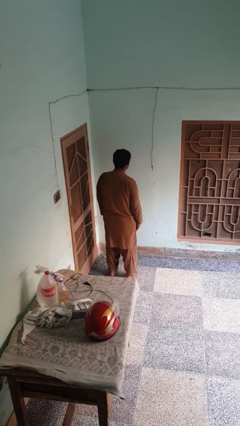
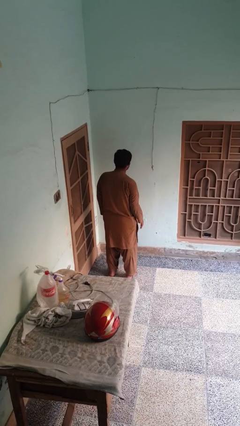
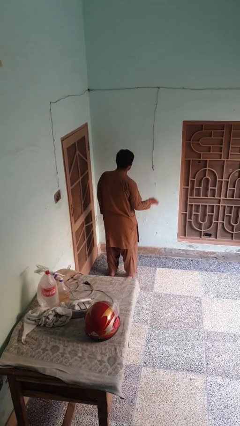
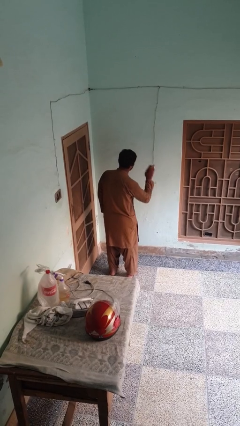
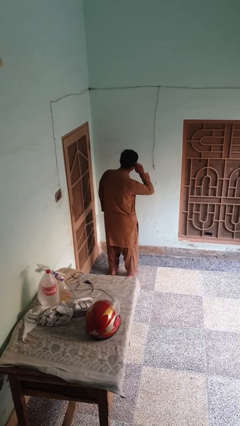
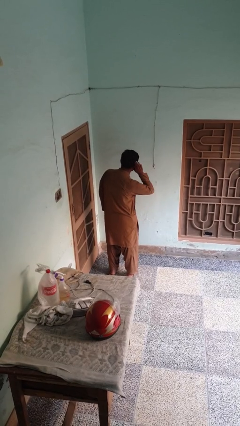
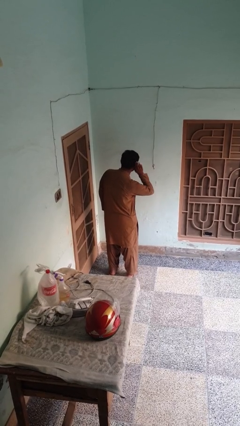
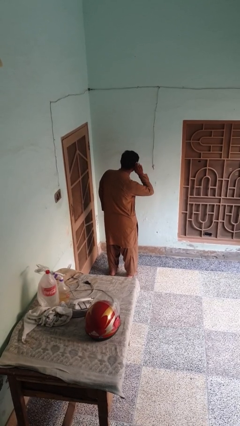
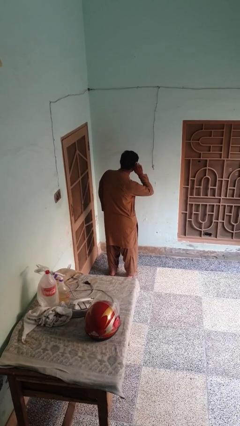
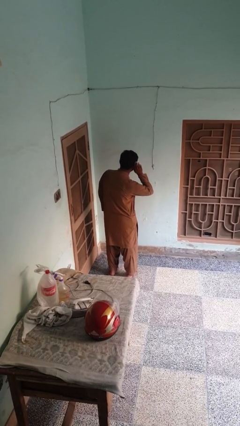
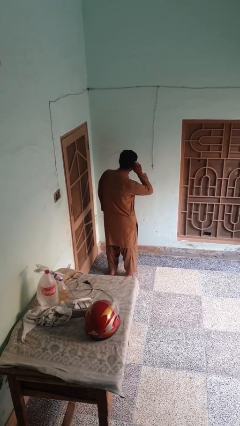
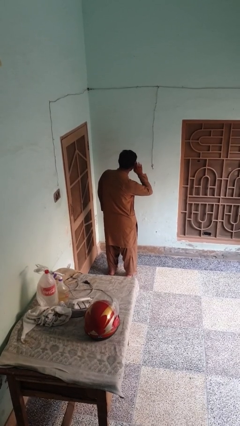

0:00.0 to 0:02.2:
person gestures listen closely

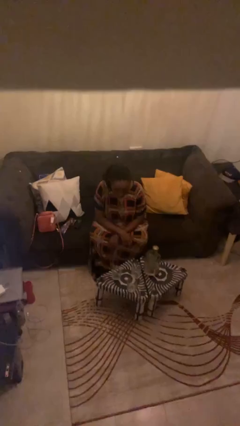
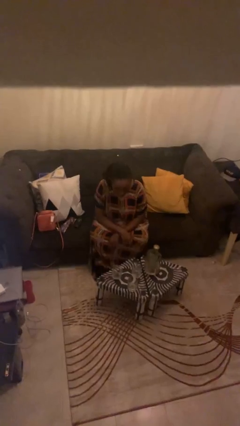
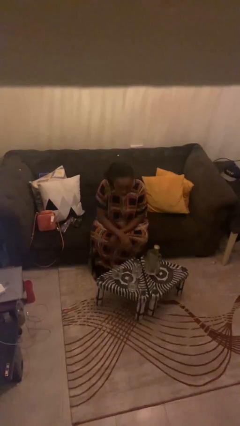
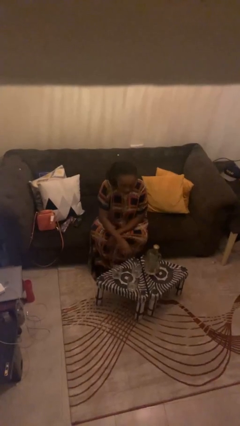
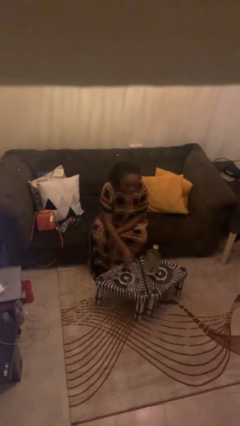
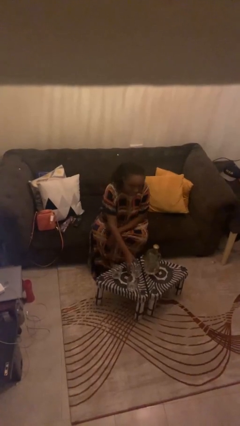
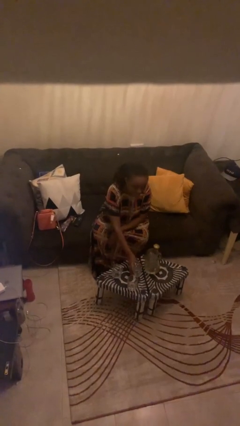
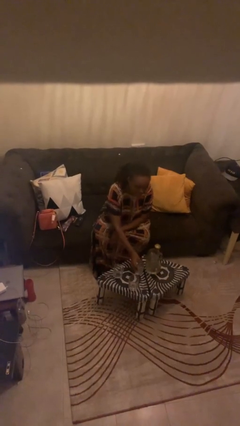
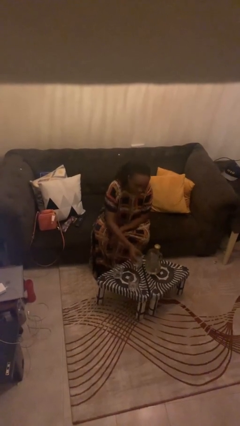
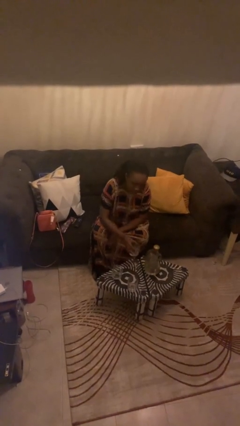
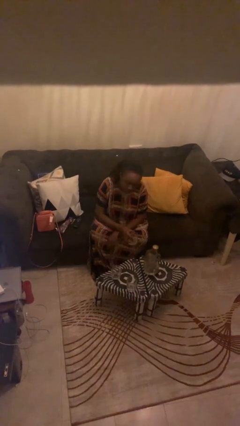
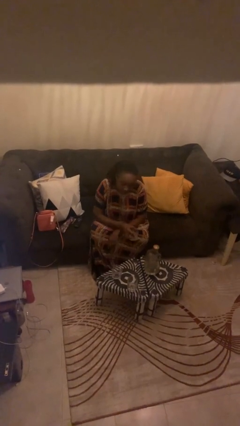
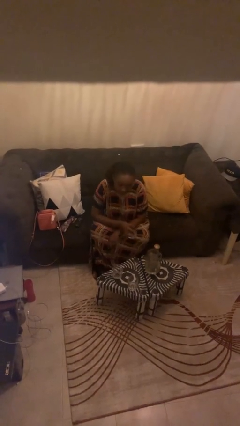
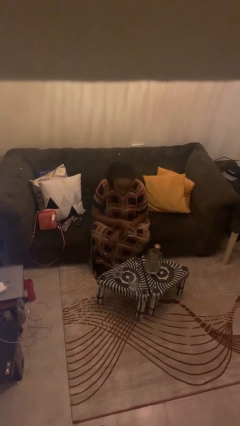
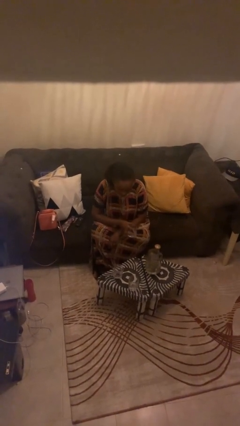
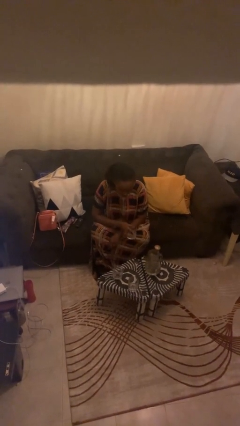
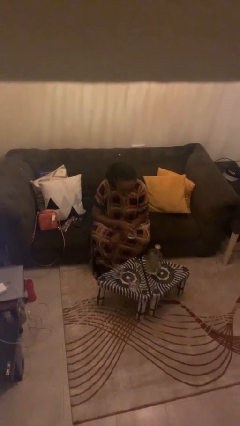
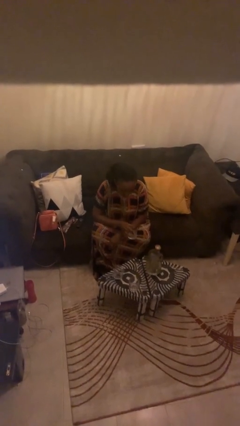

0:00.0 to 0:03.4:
person picks up object from table

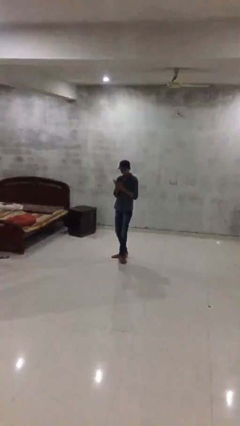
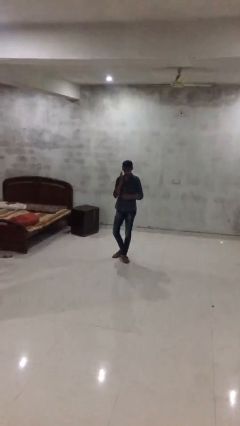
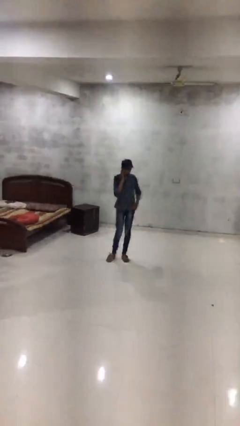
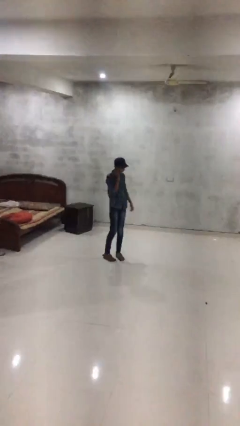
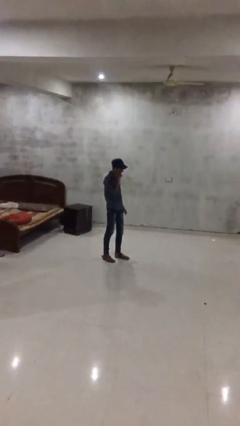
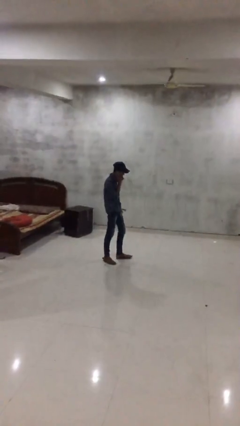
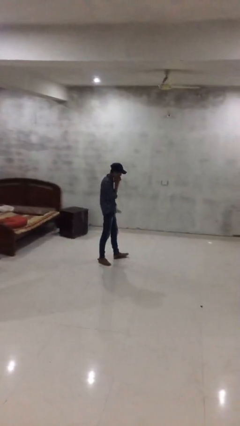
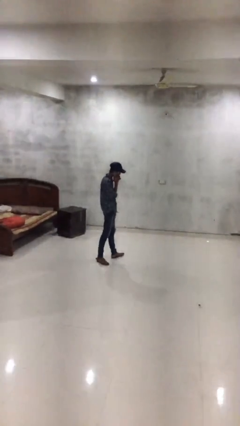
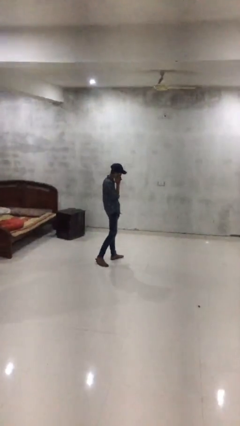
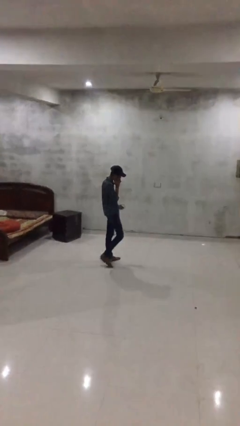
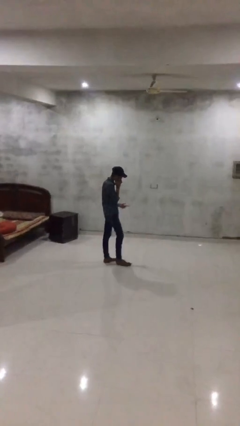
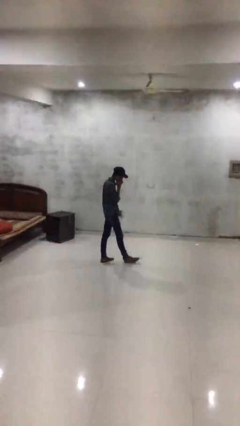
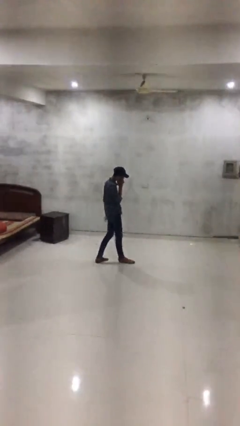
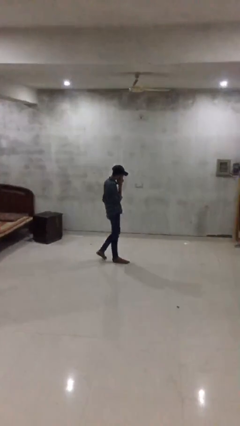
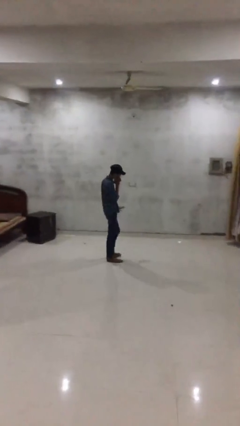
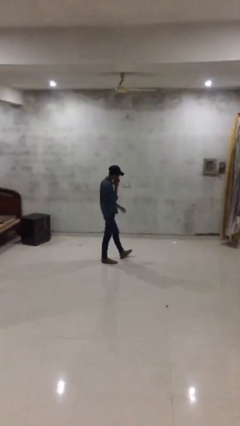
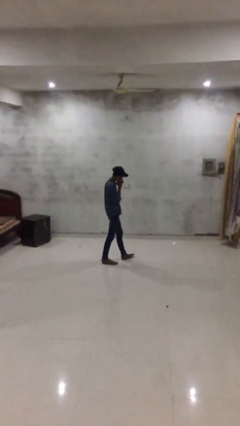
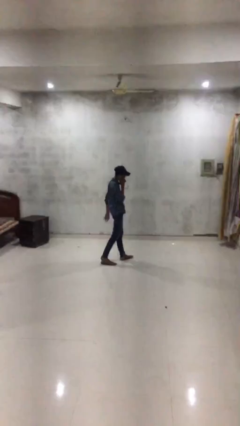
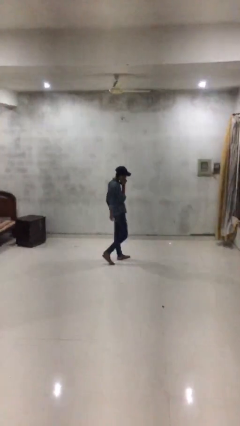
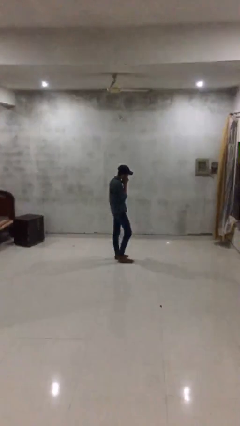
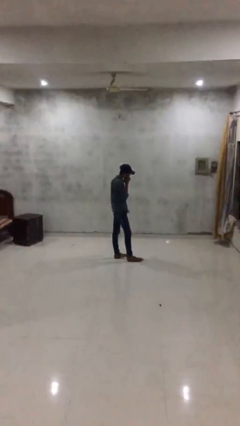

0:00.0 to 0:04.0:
person talks on phone

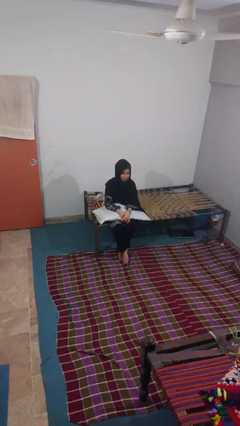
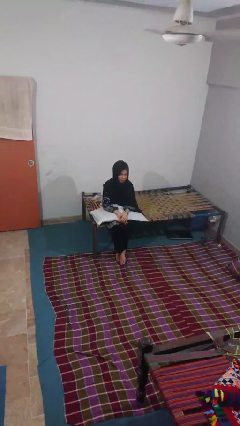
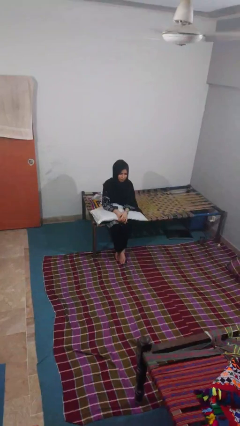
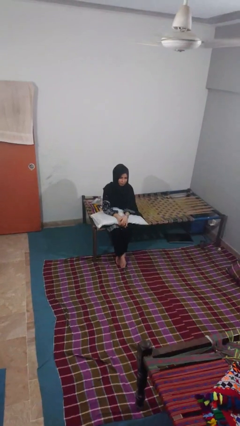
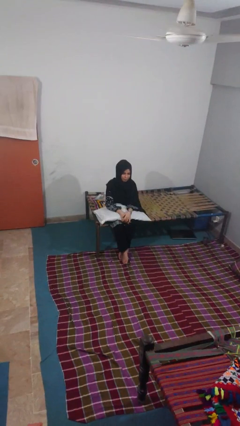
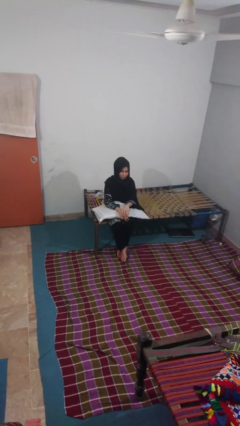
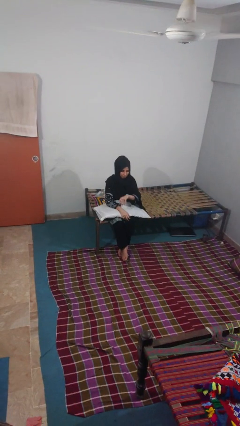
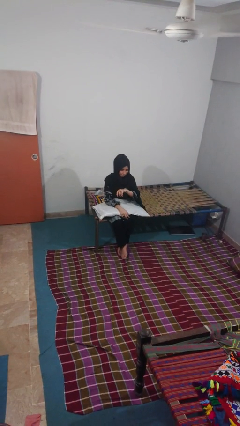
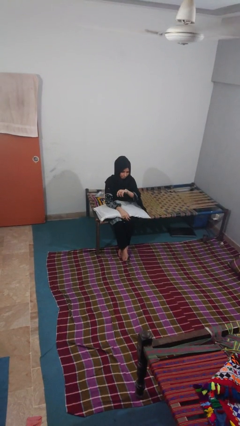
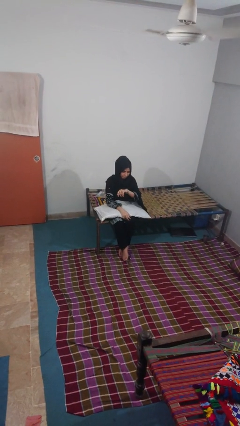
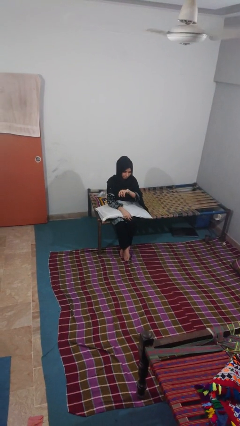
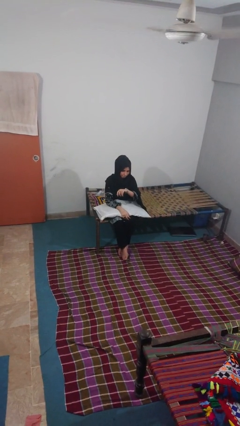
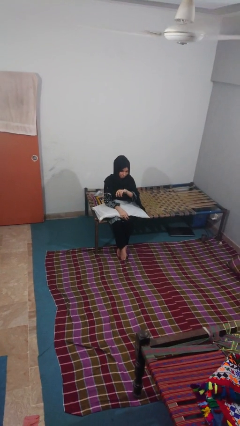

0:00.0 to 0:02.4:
person looks at wristwatch

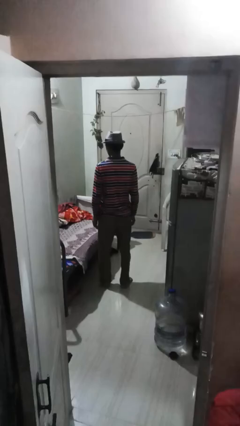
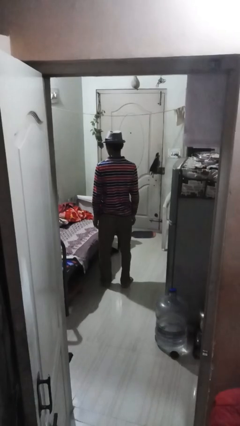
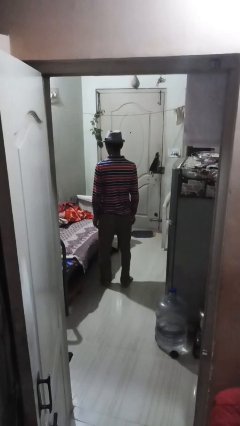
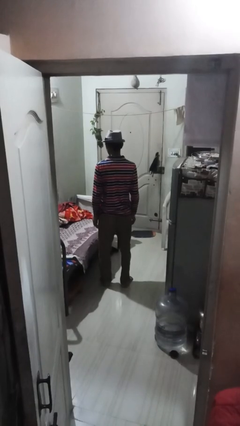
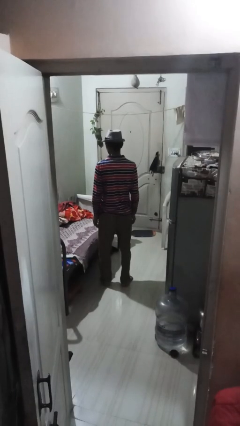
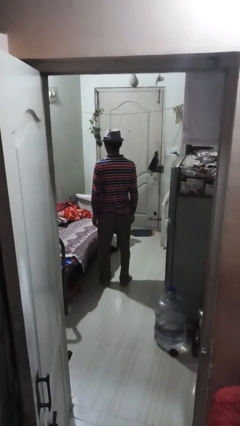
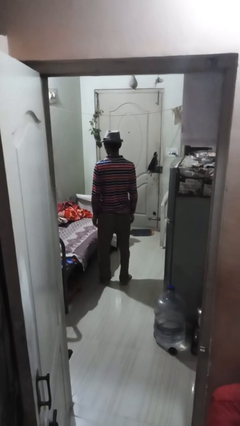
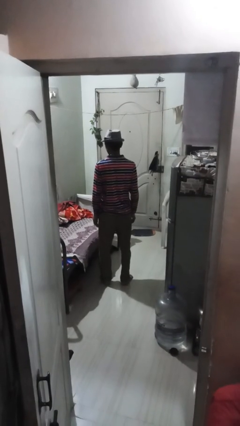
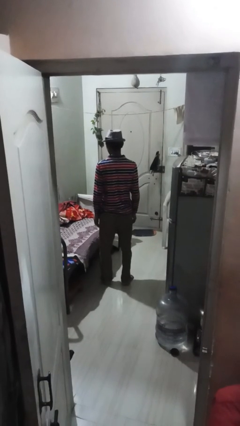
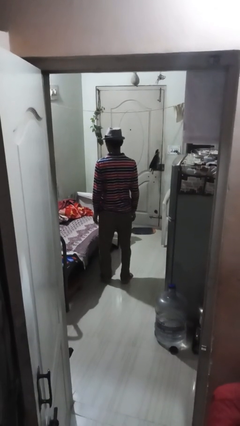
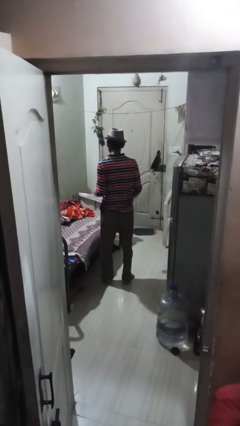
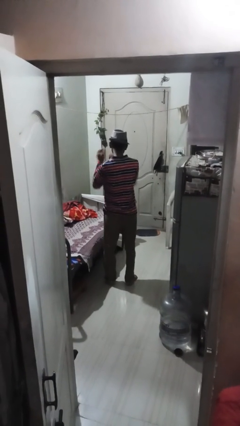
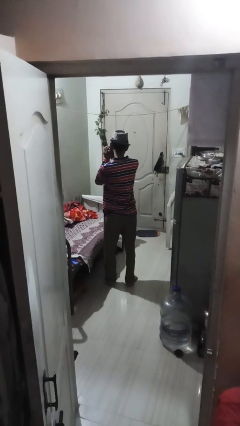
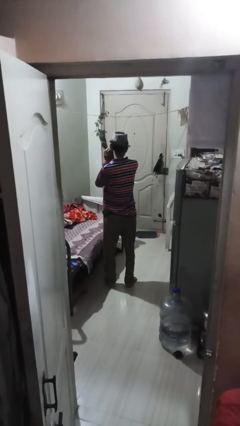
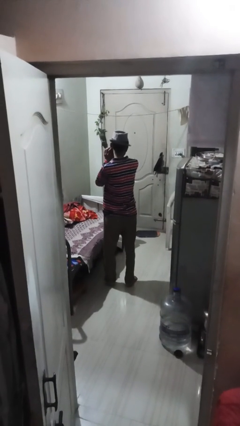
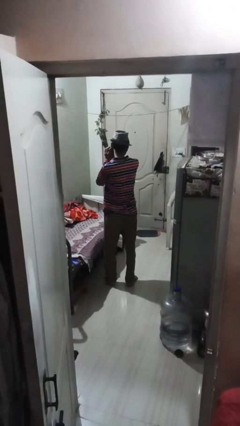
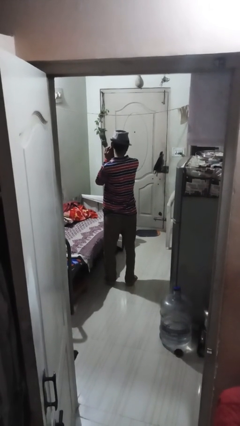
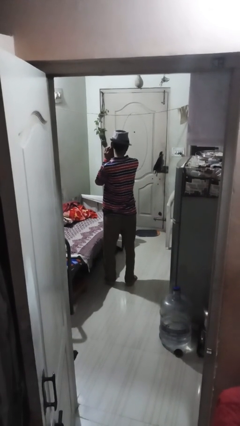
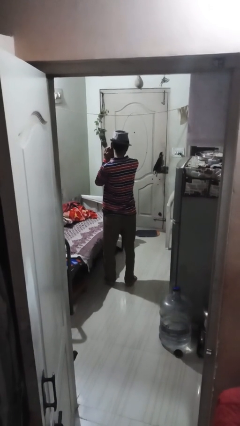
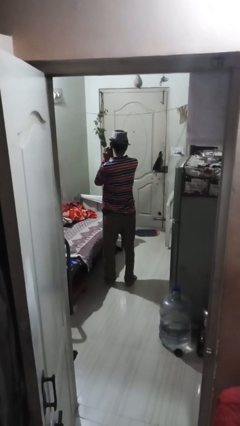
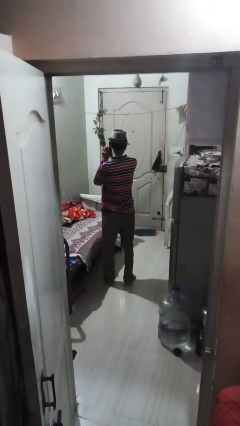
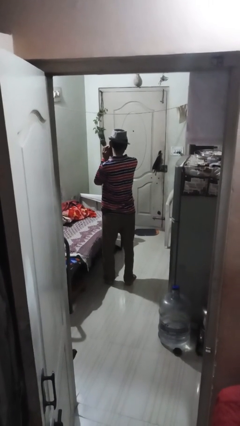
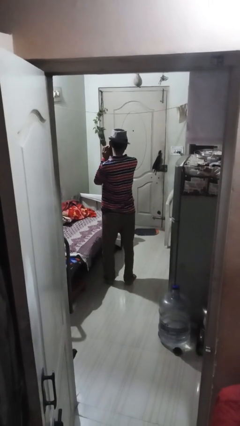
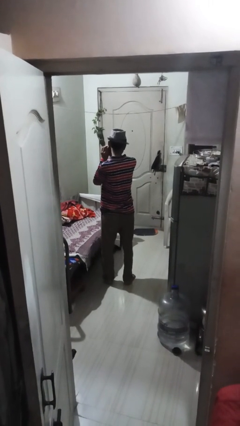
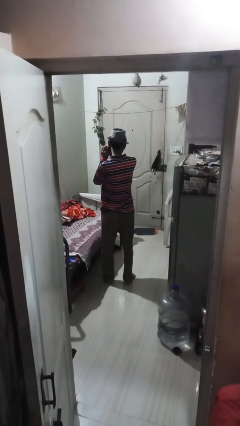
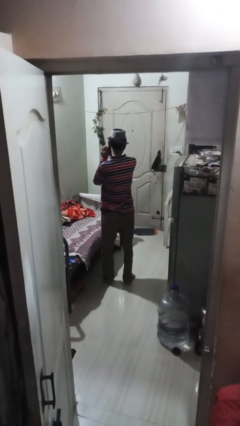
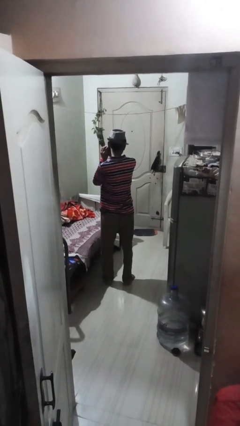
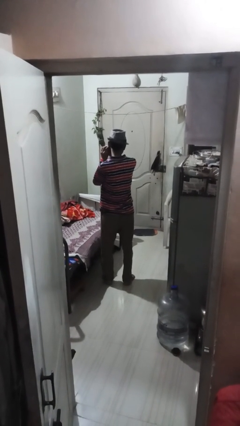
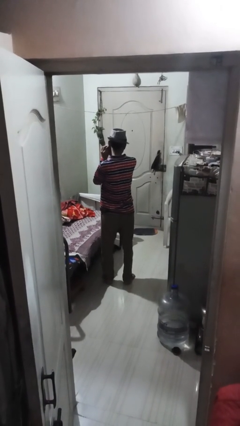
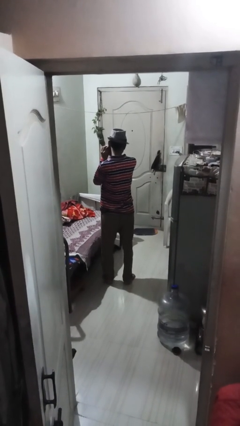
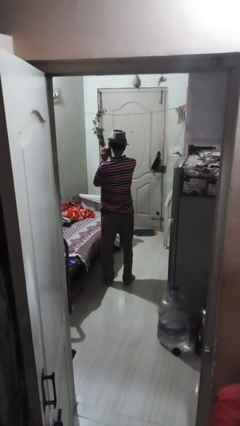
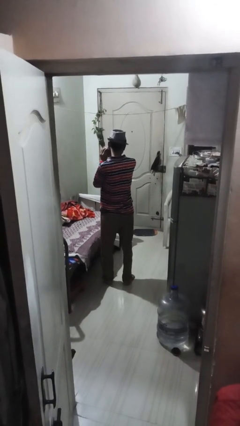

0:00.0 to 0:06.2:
person puts on earrings
